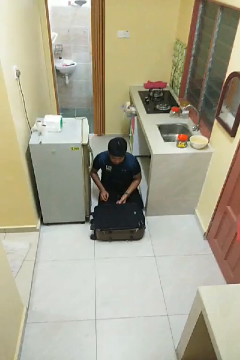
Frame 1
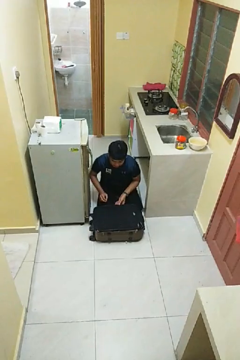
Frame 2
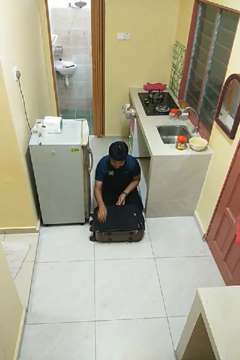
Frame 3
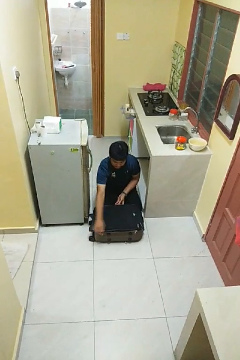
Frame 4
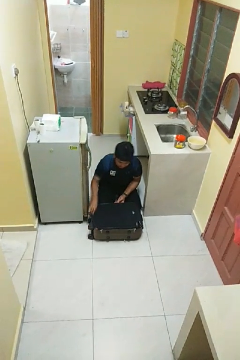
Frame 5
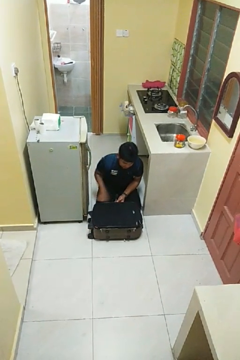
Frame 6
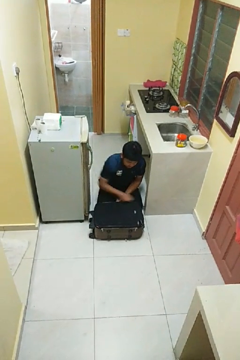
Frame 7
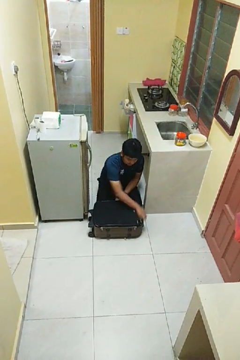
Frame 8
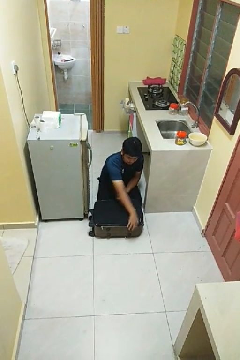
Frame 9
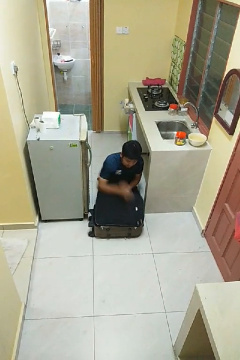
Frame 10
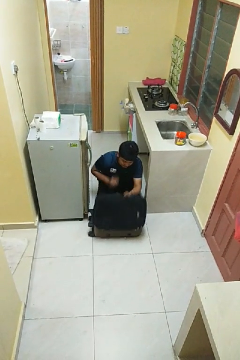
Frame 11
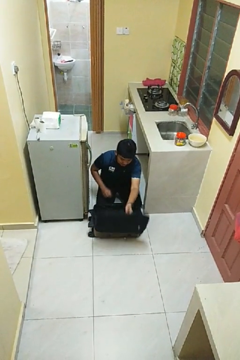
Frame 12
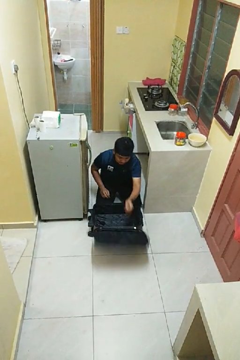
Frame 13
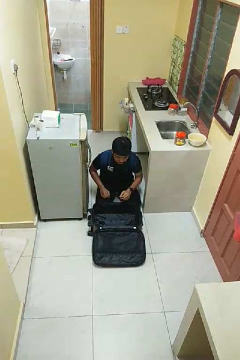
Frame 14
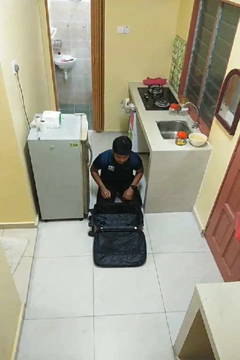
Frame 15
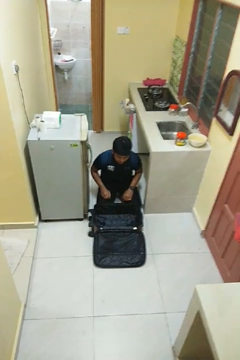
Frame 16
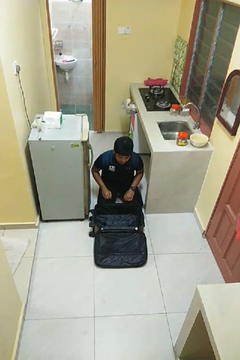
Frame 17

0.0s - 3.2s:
person opens suitcase

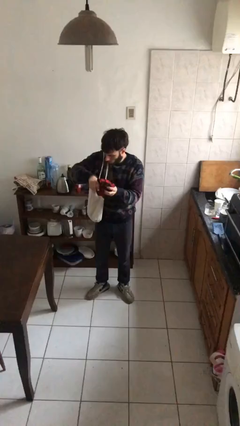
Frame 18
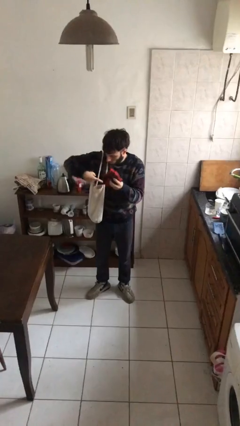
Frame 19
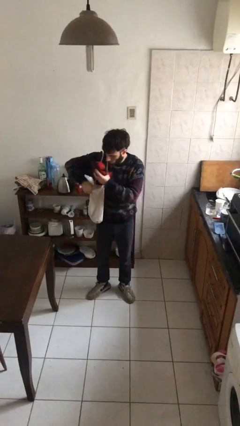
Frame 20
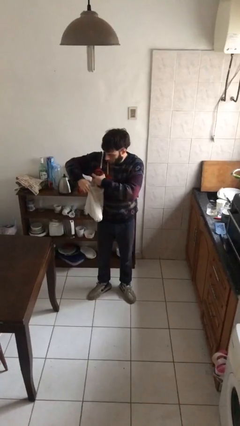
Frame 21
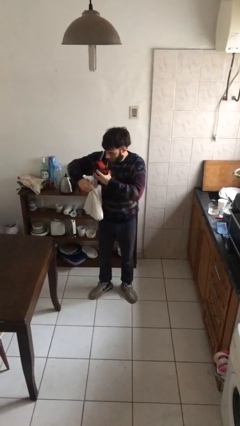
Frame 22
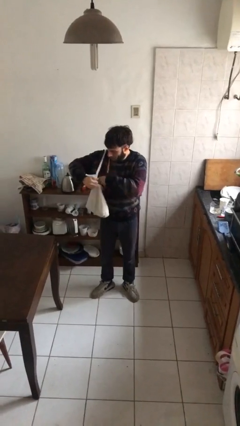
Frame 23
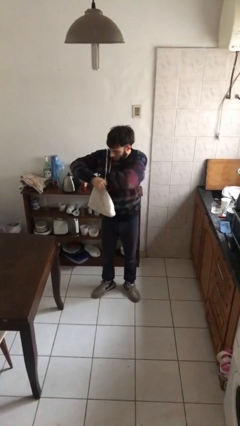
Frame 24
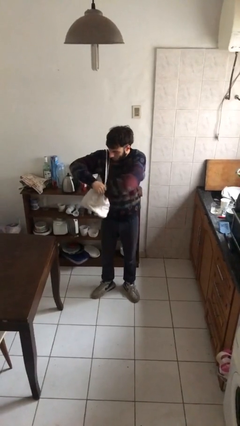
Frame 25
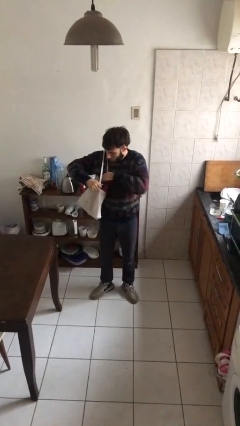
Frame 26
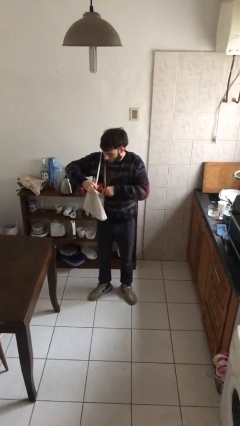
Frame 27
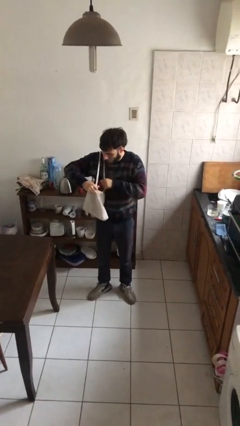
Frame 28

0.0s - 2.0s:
person puts object into purse

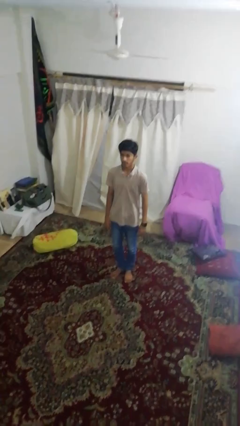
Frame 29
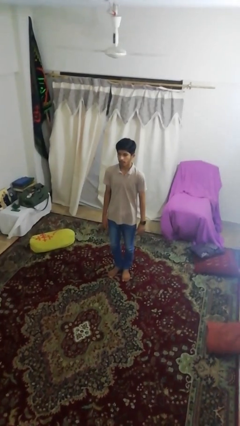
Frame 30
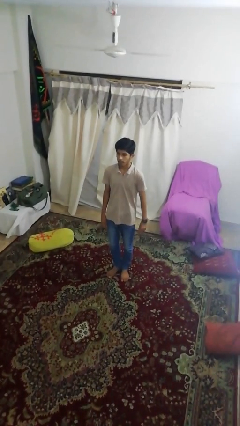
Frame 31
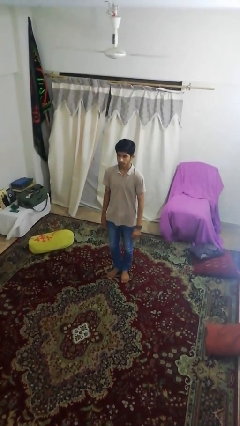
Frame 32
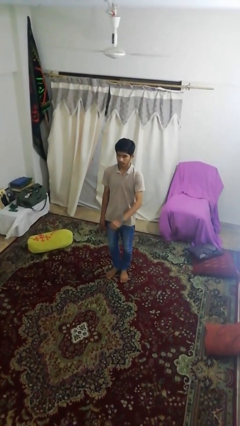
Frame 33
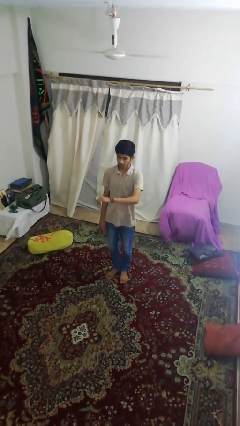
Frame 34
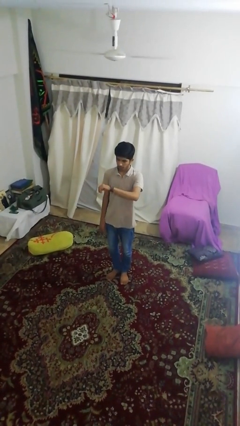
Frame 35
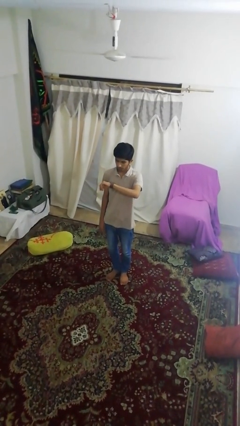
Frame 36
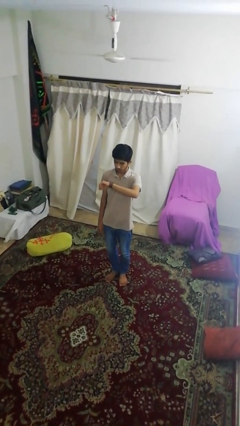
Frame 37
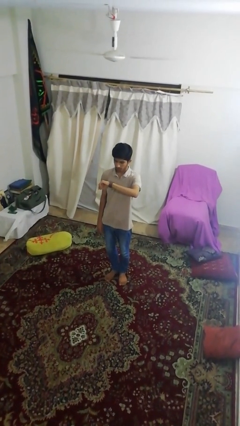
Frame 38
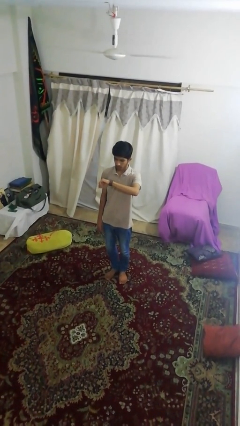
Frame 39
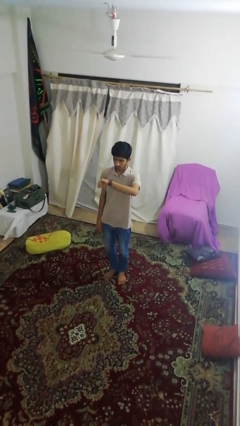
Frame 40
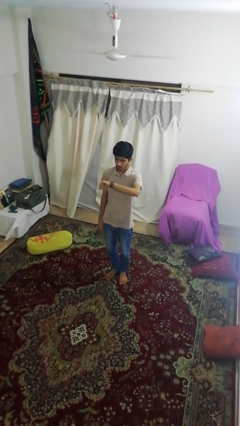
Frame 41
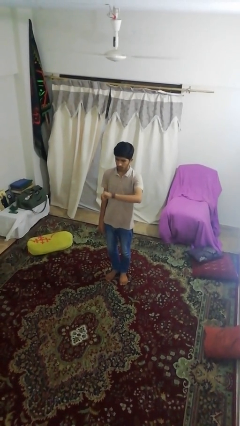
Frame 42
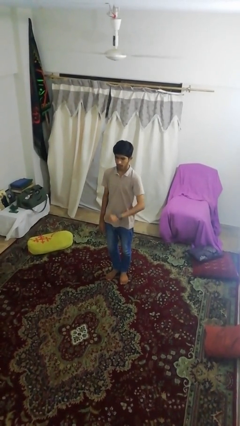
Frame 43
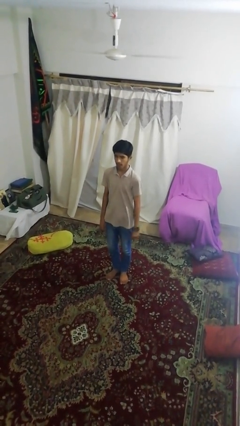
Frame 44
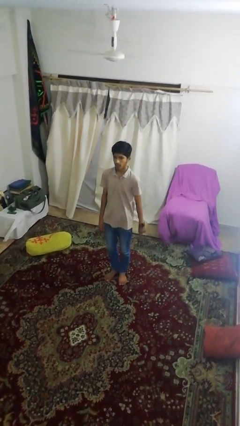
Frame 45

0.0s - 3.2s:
person looks at wristwatch

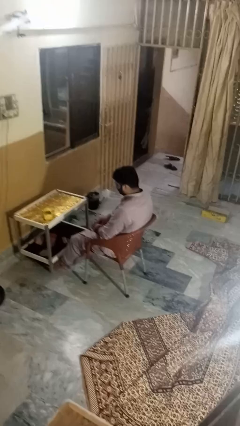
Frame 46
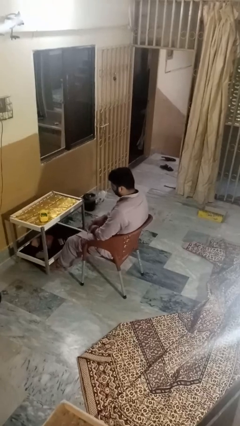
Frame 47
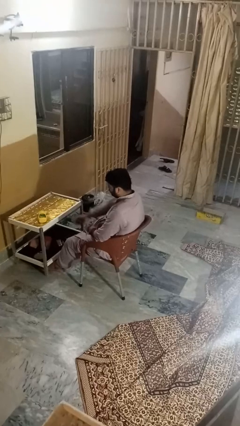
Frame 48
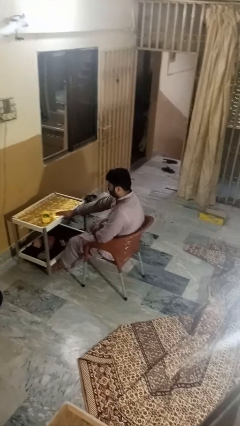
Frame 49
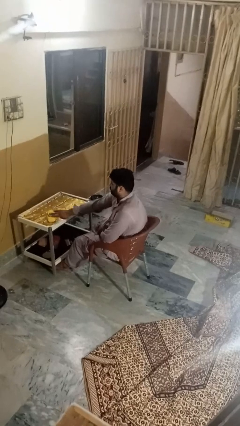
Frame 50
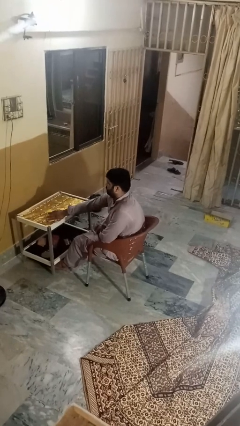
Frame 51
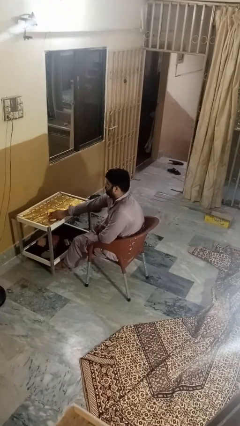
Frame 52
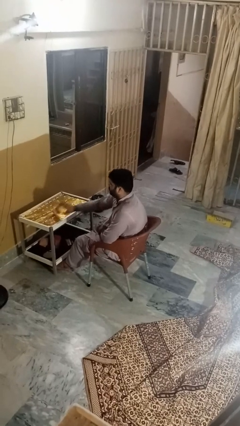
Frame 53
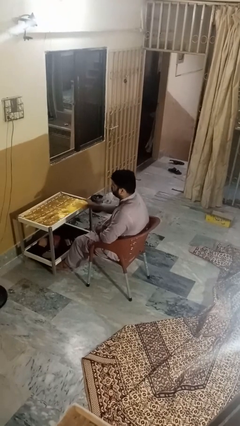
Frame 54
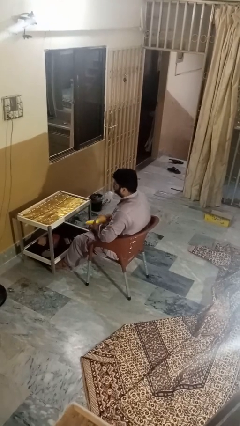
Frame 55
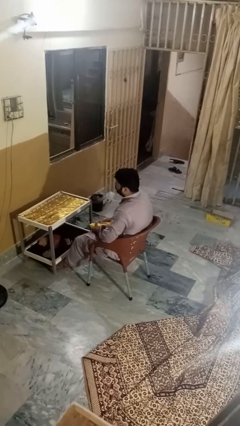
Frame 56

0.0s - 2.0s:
person picks up object from table

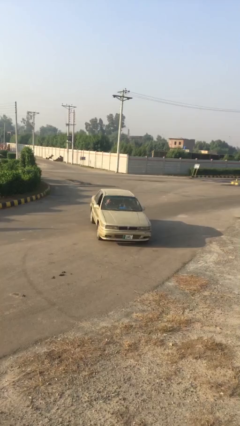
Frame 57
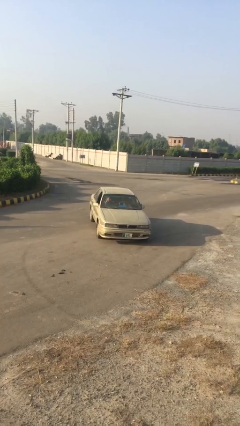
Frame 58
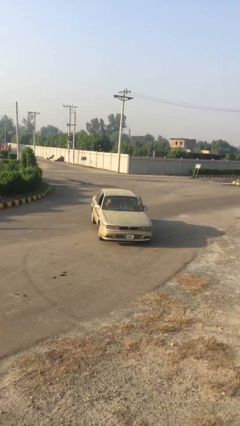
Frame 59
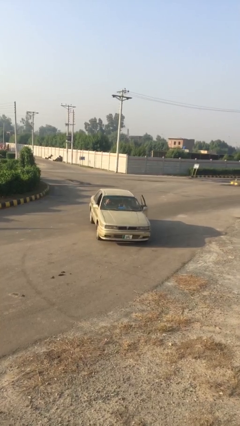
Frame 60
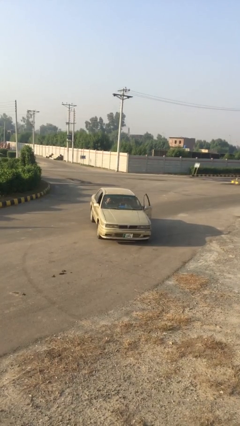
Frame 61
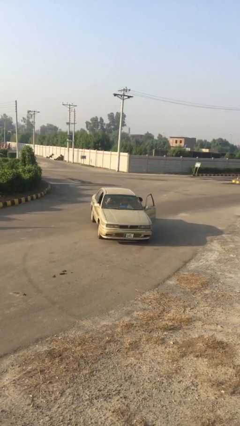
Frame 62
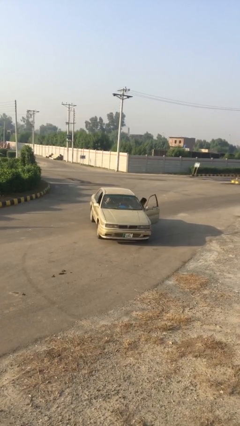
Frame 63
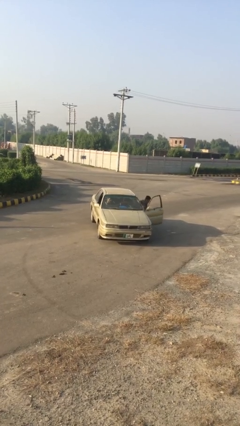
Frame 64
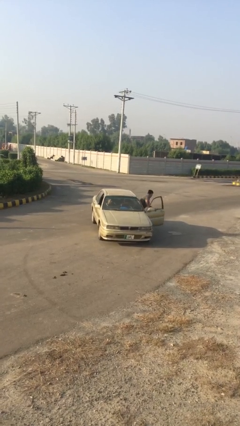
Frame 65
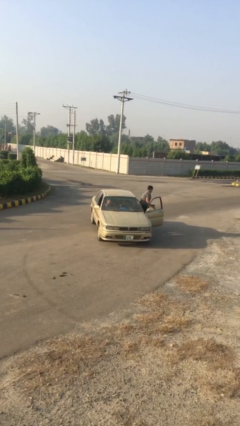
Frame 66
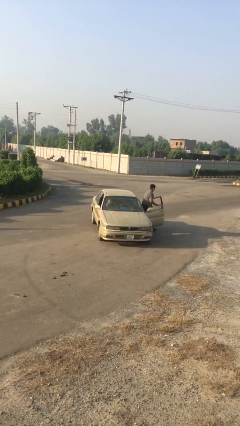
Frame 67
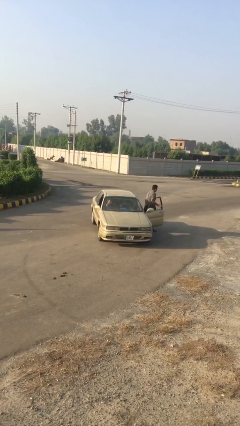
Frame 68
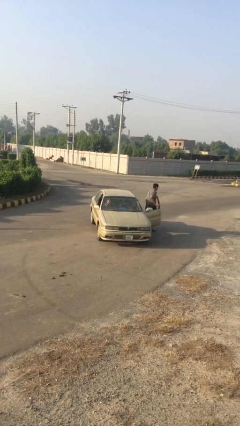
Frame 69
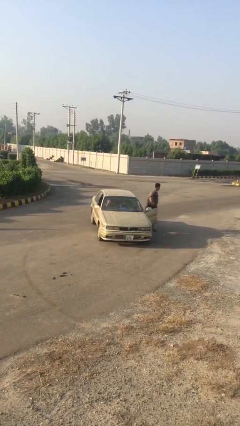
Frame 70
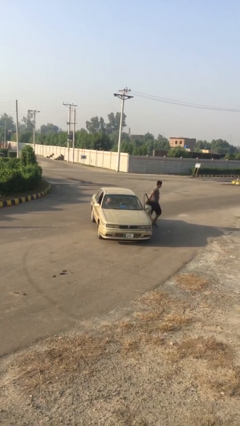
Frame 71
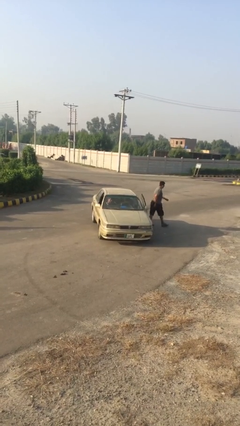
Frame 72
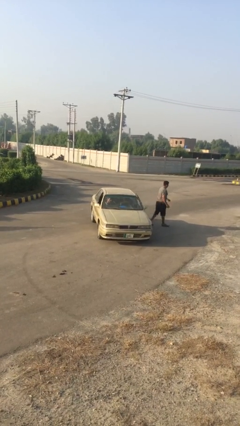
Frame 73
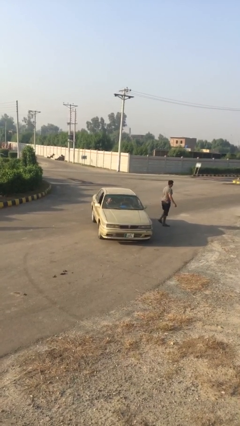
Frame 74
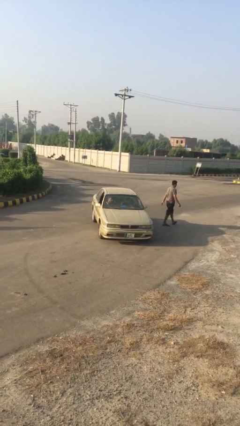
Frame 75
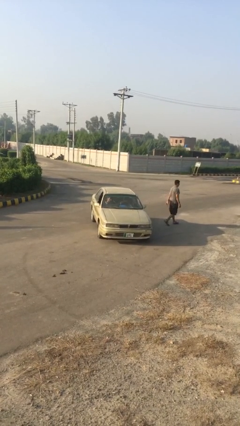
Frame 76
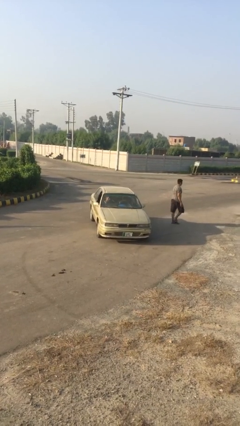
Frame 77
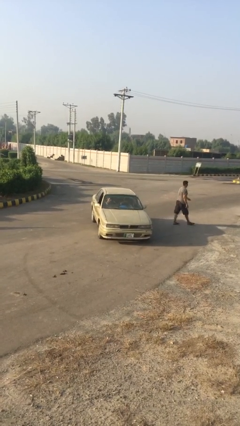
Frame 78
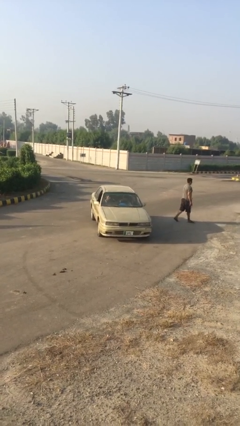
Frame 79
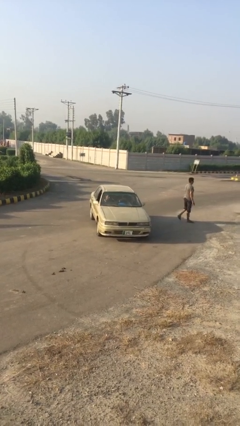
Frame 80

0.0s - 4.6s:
car drops off person

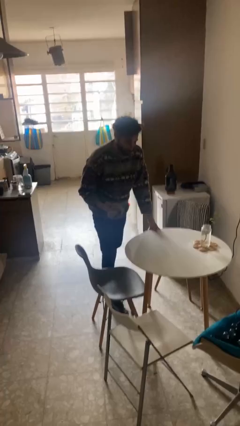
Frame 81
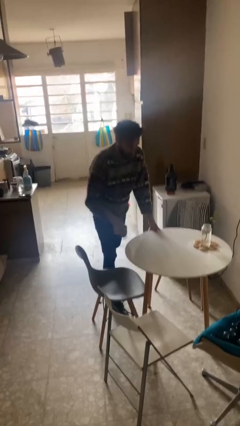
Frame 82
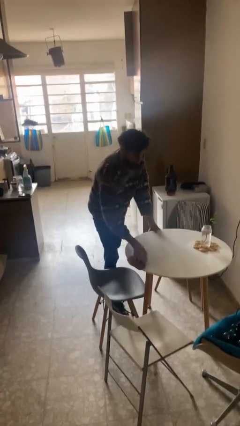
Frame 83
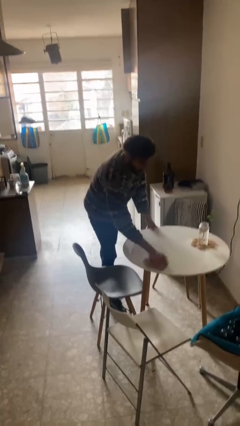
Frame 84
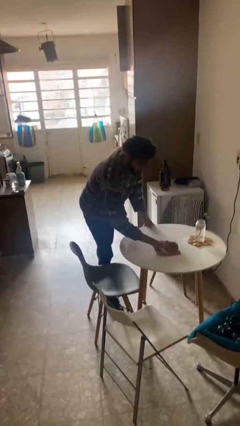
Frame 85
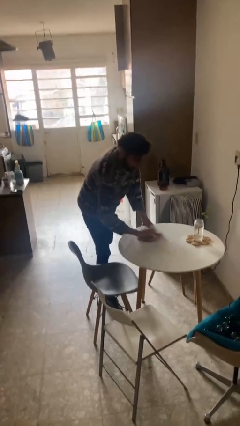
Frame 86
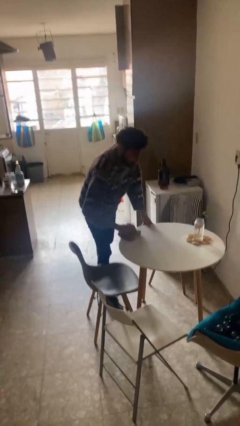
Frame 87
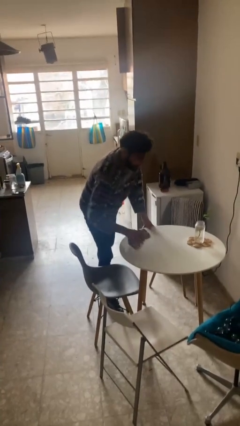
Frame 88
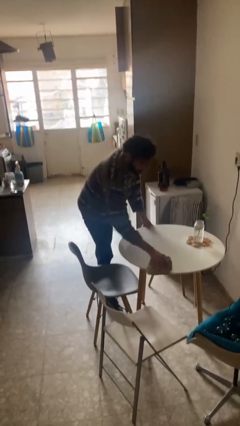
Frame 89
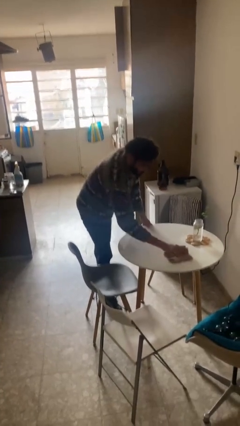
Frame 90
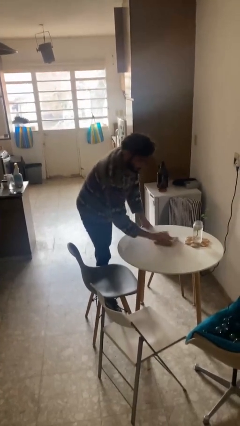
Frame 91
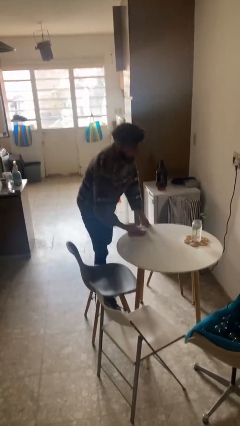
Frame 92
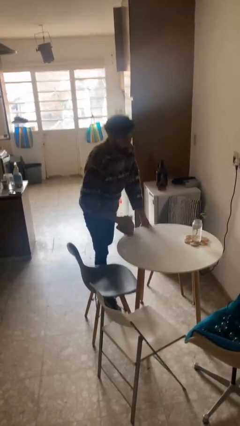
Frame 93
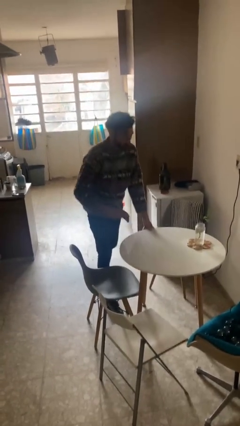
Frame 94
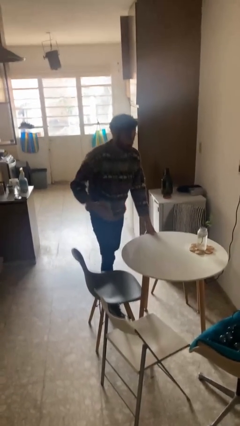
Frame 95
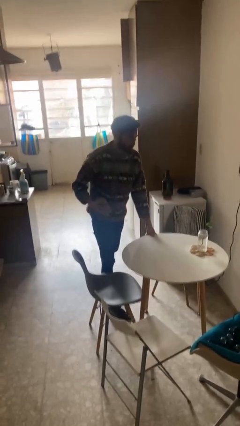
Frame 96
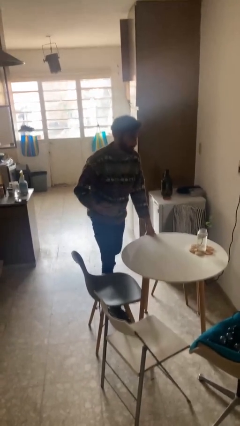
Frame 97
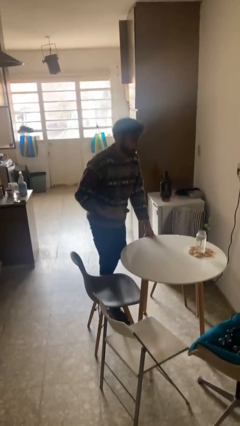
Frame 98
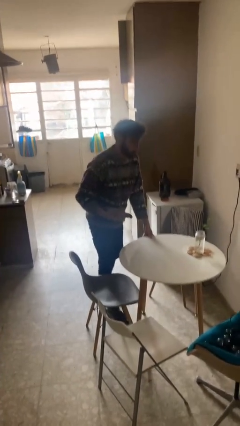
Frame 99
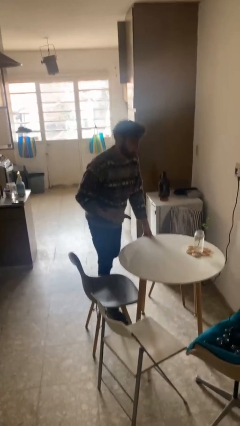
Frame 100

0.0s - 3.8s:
person cleans table with rag
